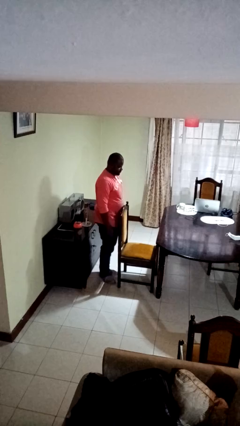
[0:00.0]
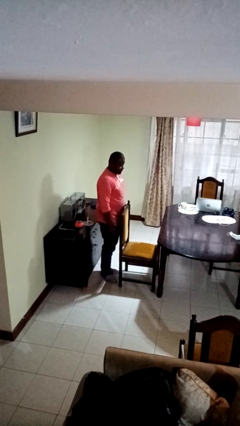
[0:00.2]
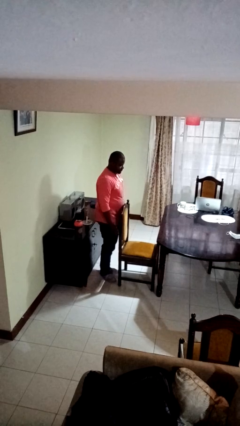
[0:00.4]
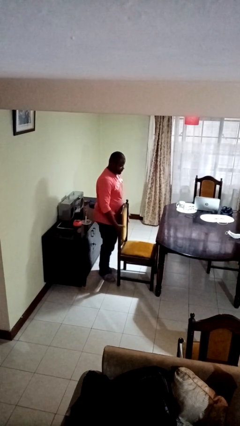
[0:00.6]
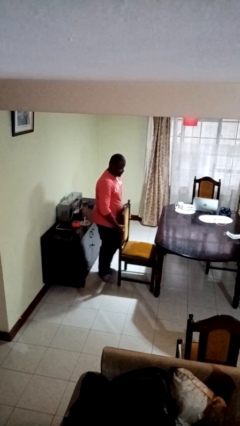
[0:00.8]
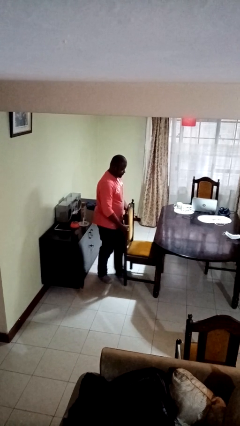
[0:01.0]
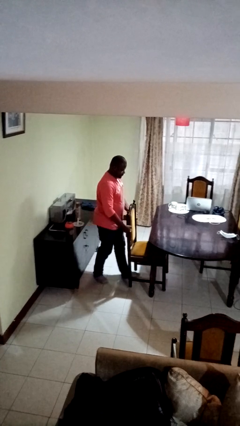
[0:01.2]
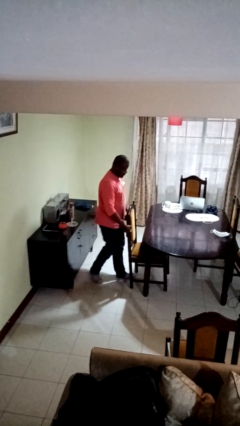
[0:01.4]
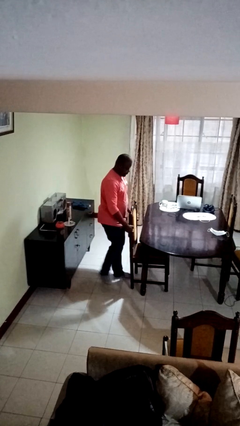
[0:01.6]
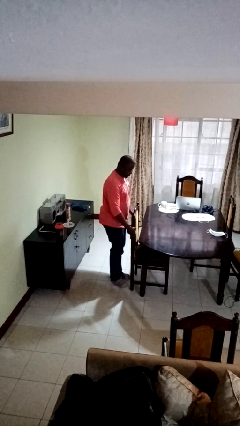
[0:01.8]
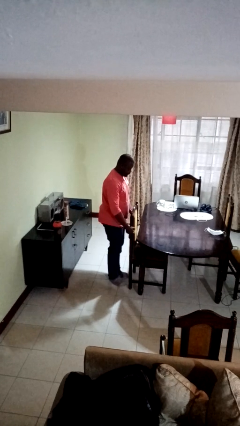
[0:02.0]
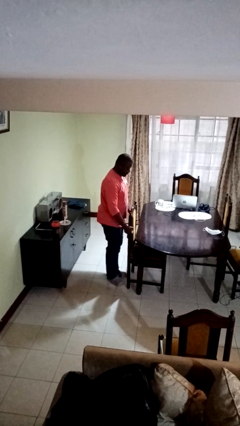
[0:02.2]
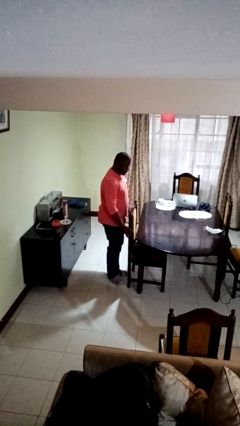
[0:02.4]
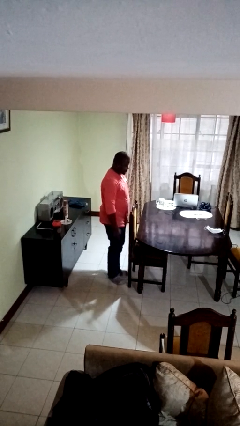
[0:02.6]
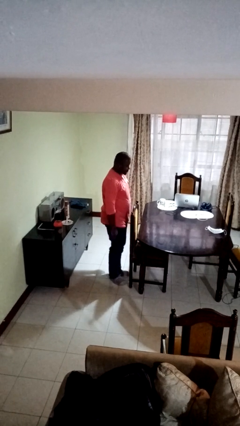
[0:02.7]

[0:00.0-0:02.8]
person pushes in chair

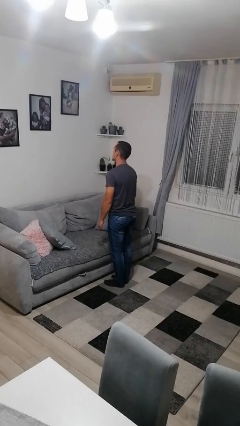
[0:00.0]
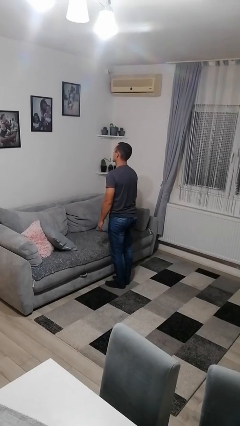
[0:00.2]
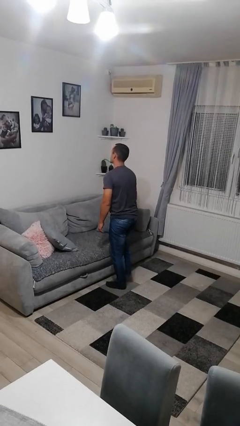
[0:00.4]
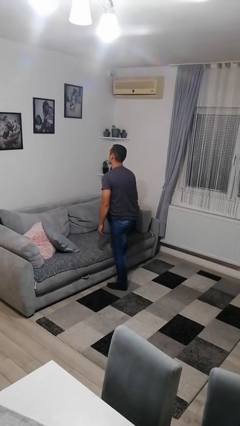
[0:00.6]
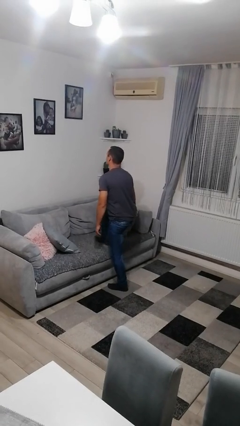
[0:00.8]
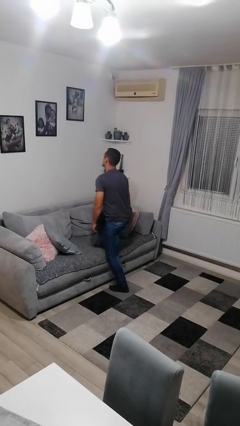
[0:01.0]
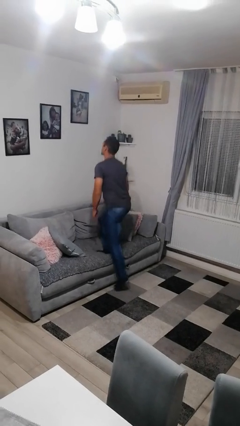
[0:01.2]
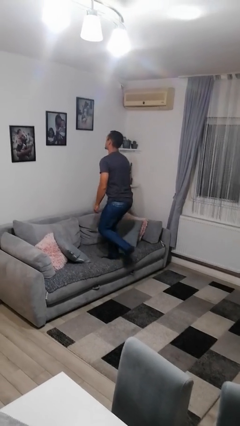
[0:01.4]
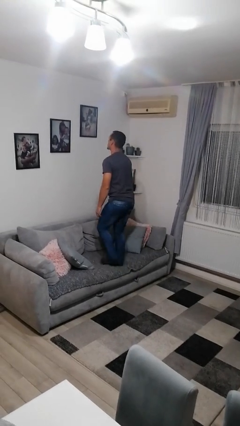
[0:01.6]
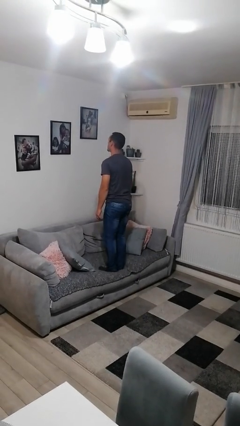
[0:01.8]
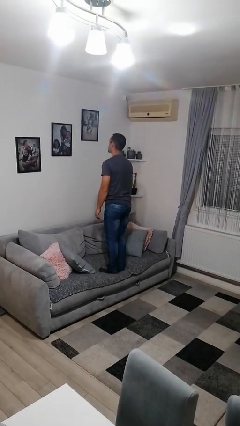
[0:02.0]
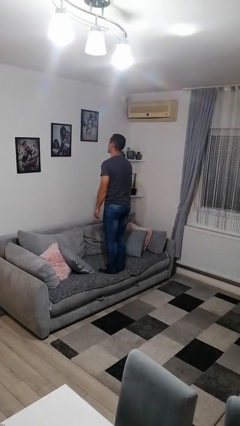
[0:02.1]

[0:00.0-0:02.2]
person climbs on couch

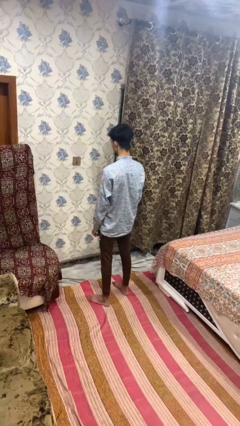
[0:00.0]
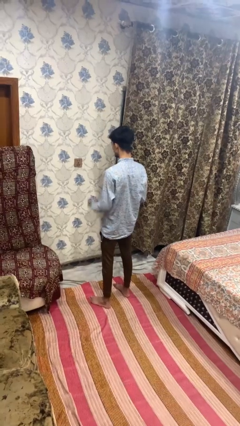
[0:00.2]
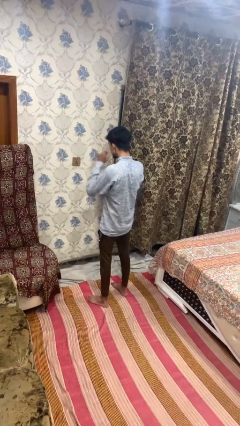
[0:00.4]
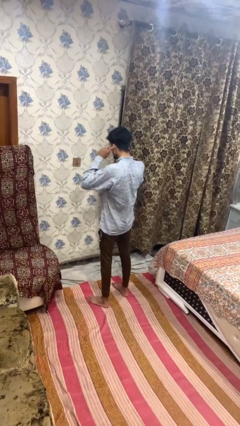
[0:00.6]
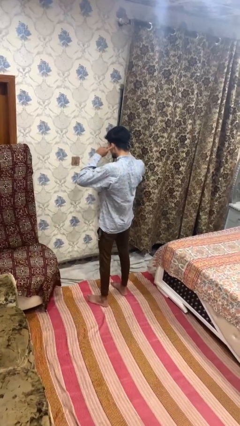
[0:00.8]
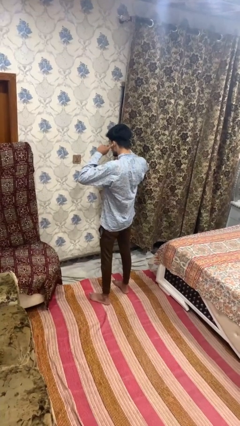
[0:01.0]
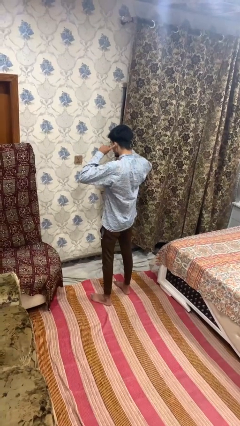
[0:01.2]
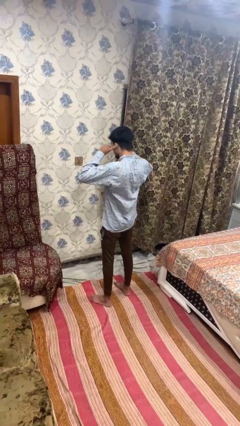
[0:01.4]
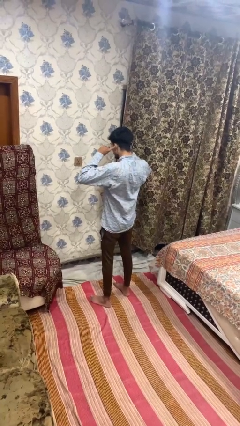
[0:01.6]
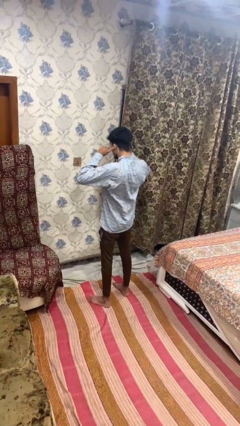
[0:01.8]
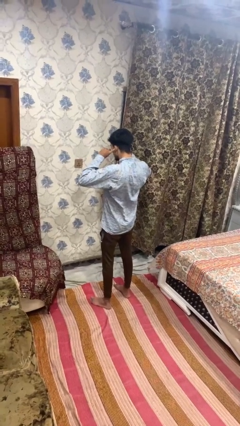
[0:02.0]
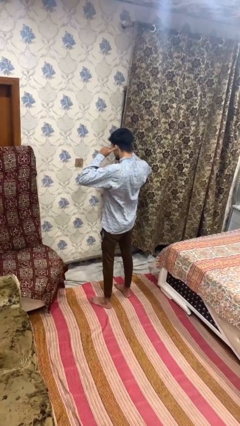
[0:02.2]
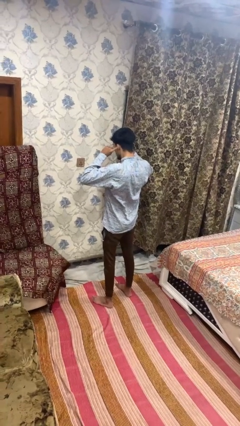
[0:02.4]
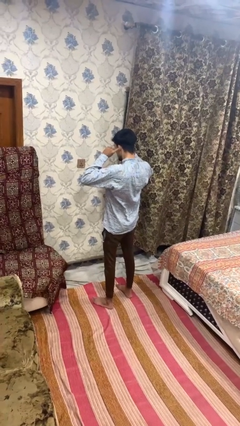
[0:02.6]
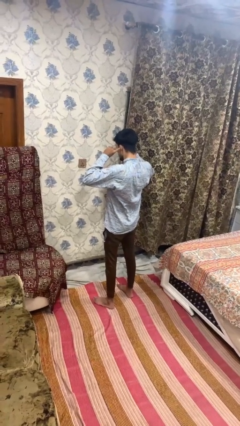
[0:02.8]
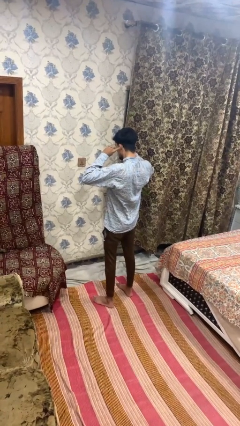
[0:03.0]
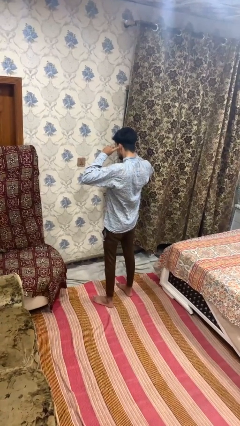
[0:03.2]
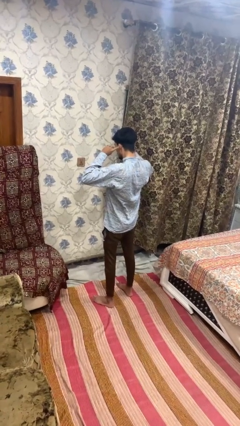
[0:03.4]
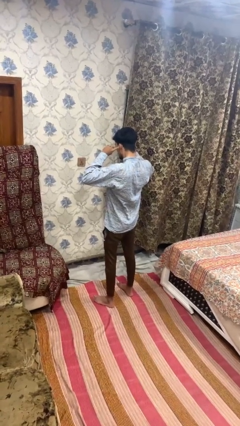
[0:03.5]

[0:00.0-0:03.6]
person puts fingers in ear

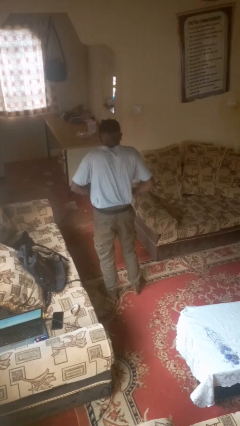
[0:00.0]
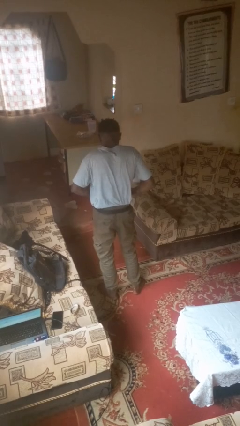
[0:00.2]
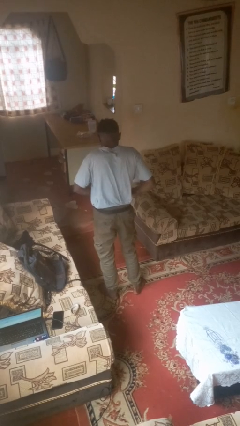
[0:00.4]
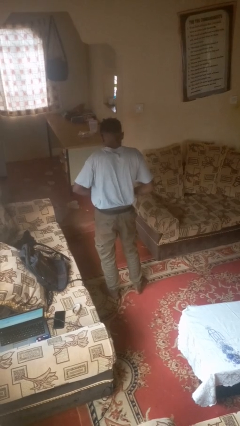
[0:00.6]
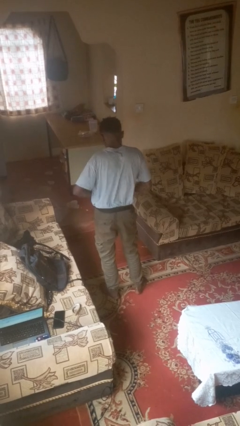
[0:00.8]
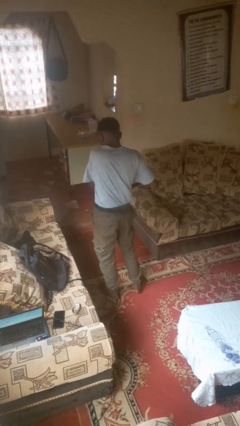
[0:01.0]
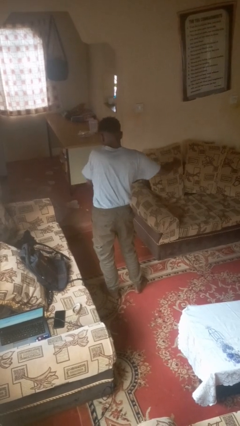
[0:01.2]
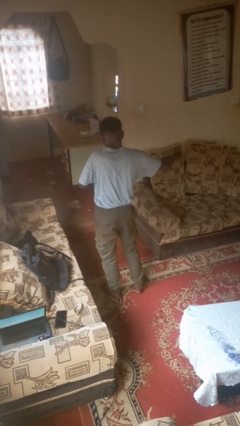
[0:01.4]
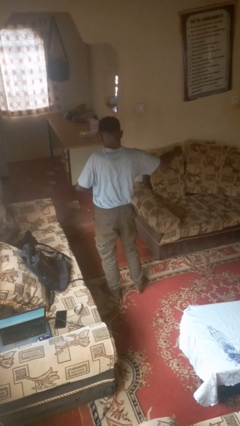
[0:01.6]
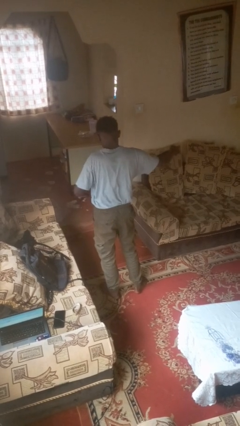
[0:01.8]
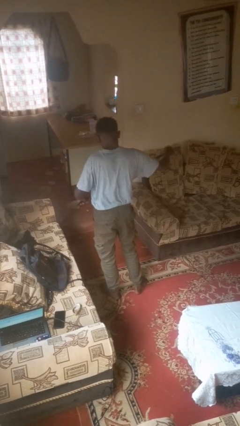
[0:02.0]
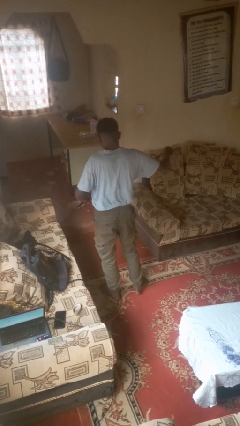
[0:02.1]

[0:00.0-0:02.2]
person takes off belt

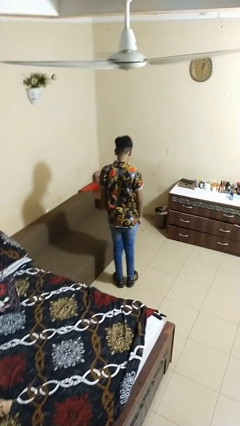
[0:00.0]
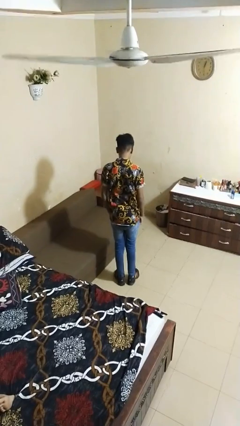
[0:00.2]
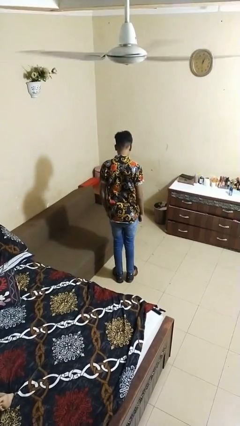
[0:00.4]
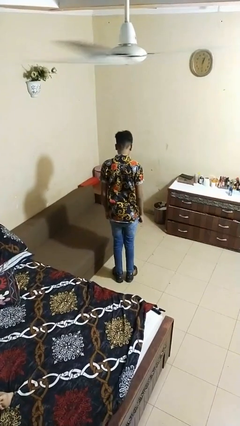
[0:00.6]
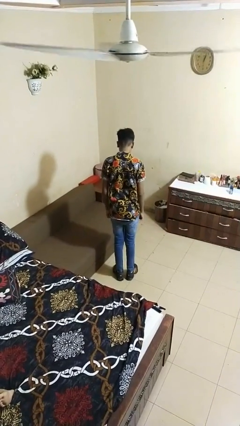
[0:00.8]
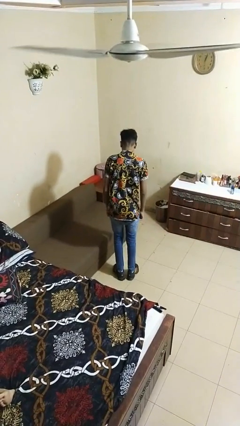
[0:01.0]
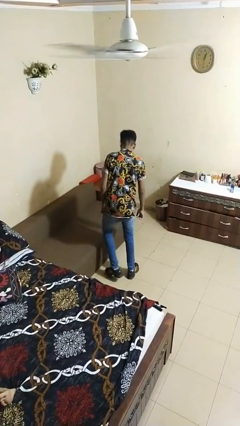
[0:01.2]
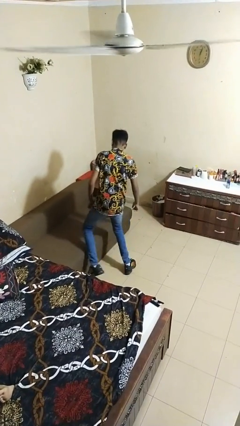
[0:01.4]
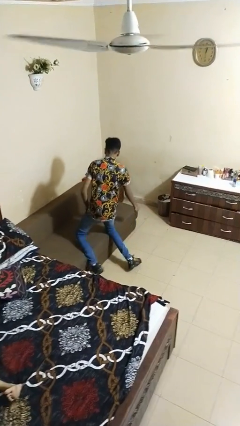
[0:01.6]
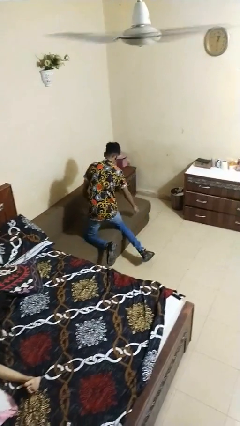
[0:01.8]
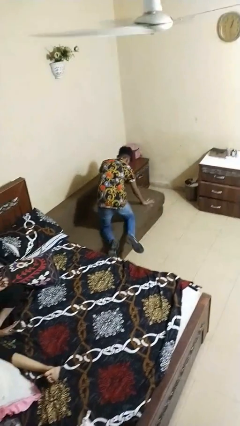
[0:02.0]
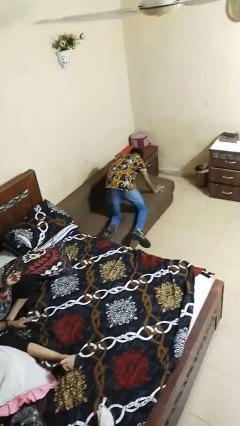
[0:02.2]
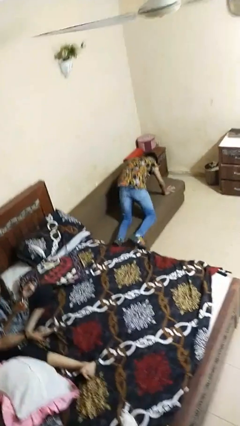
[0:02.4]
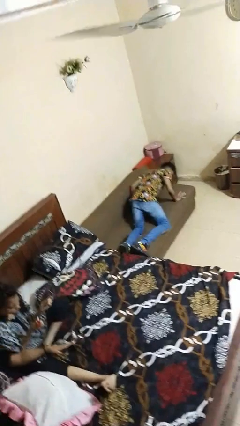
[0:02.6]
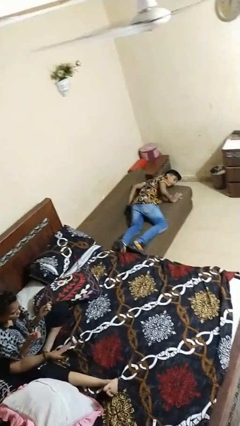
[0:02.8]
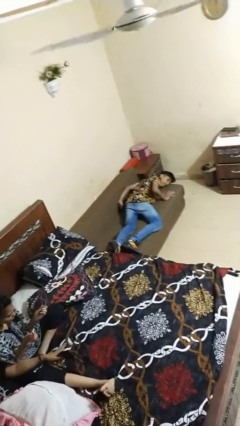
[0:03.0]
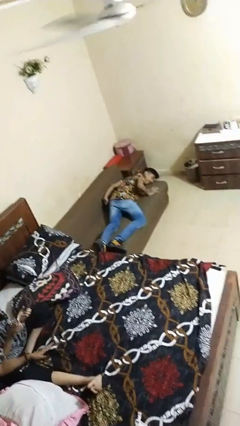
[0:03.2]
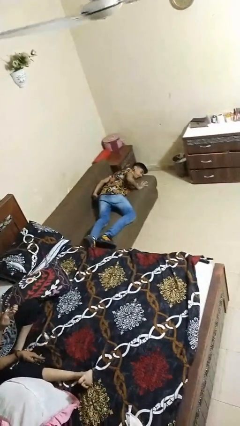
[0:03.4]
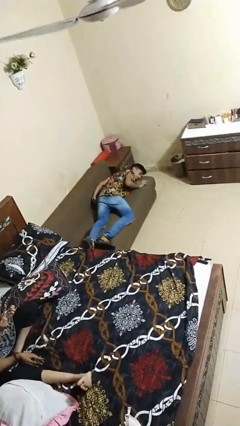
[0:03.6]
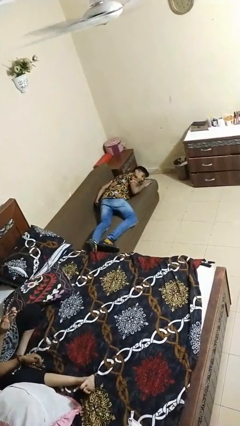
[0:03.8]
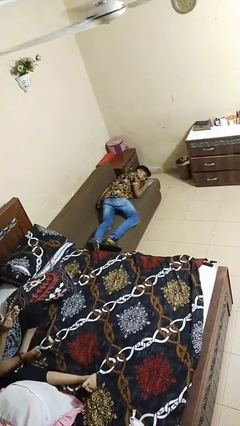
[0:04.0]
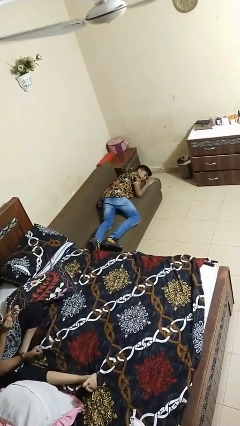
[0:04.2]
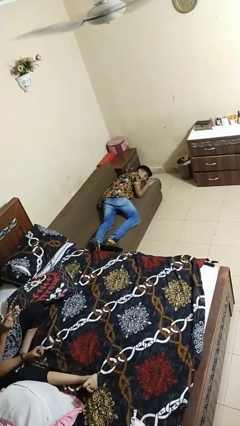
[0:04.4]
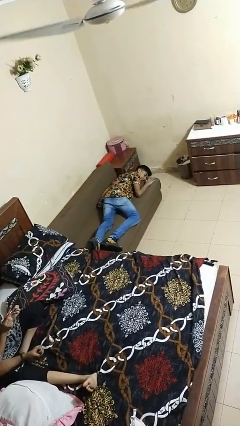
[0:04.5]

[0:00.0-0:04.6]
person lies down on bed

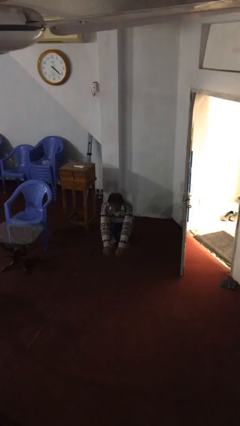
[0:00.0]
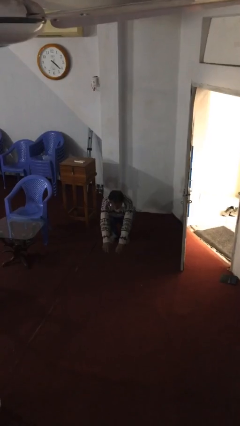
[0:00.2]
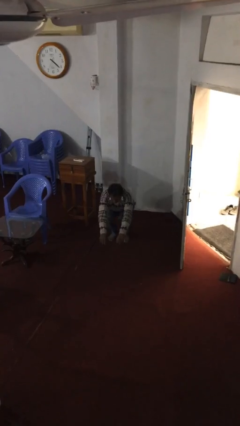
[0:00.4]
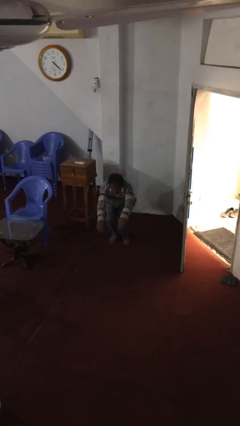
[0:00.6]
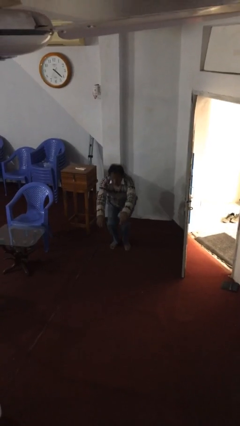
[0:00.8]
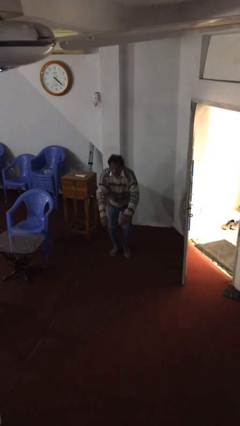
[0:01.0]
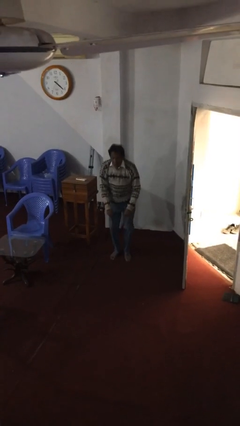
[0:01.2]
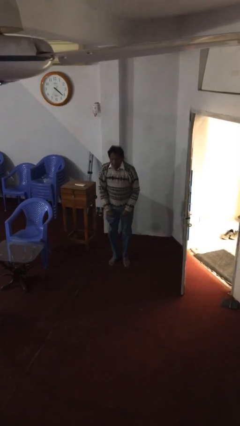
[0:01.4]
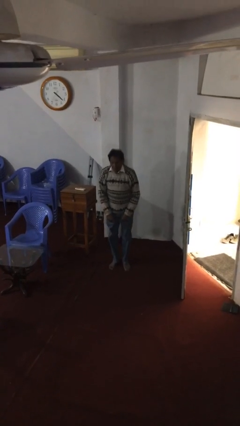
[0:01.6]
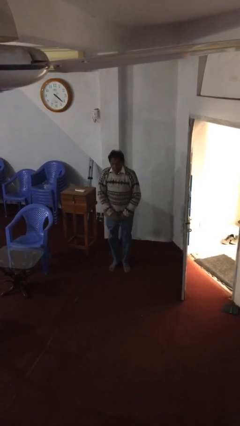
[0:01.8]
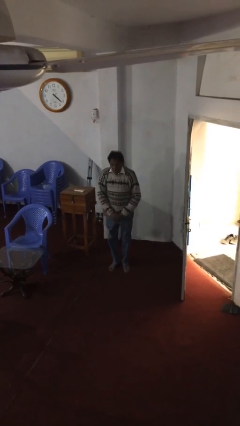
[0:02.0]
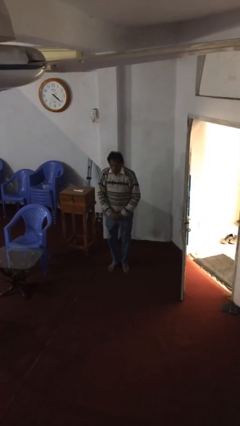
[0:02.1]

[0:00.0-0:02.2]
person stands up

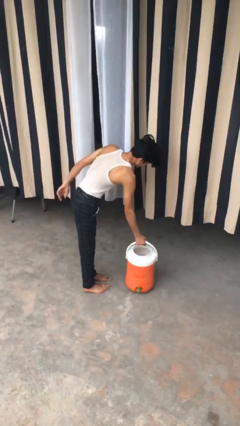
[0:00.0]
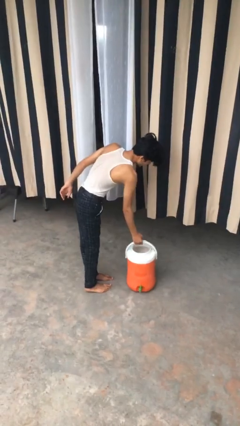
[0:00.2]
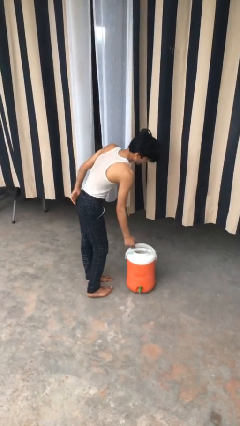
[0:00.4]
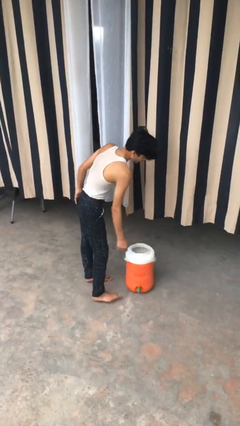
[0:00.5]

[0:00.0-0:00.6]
person puts down object on floor
